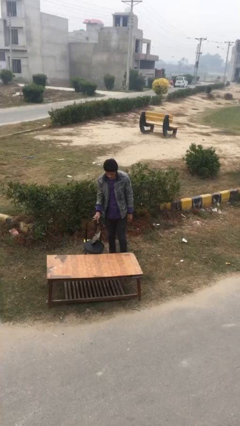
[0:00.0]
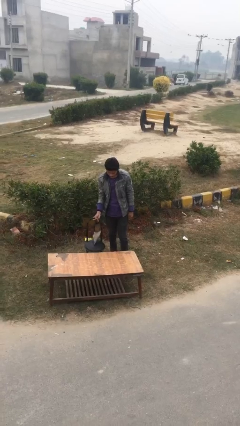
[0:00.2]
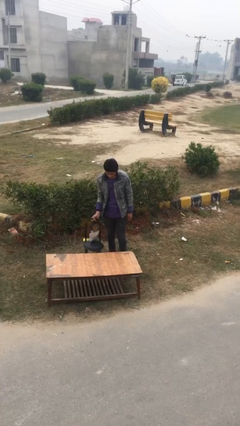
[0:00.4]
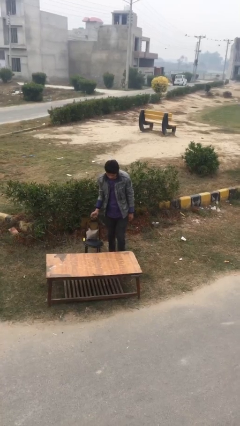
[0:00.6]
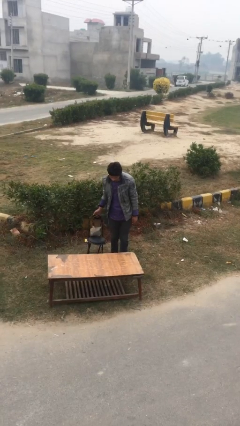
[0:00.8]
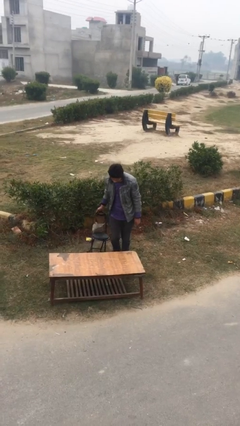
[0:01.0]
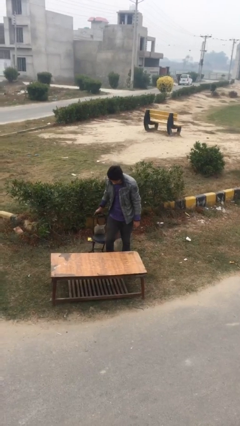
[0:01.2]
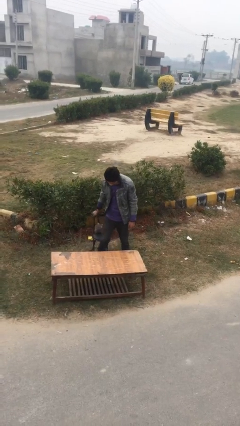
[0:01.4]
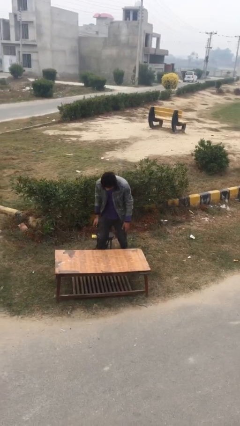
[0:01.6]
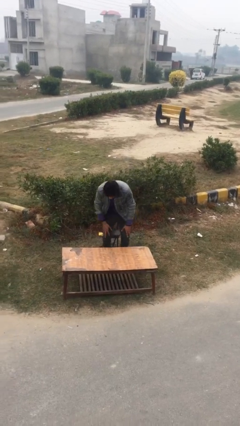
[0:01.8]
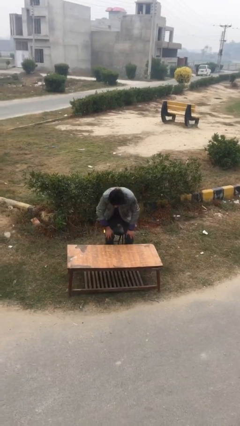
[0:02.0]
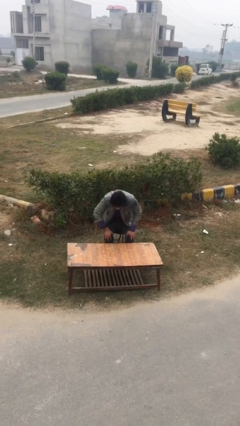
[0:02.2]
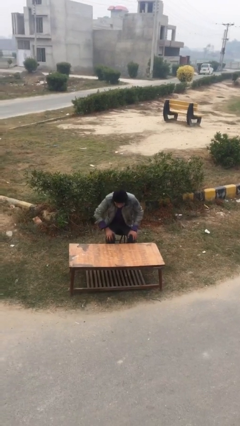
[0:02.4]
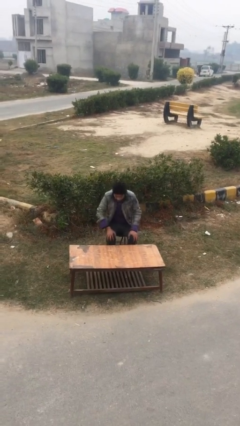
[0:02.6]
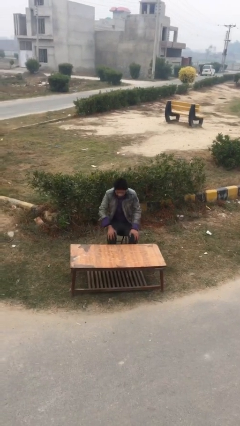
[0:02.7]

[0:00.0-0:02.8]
person sits down

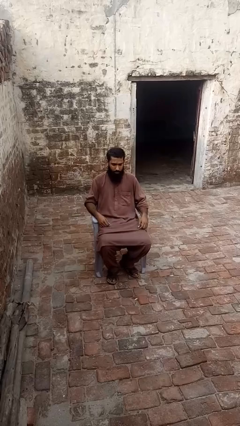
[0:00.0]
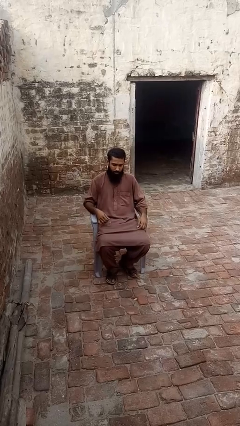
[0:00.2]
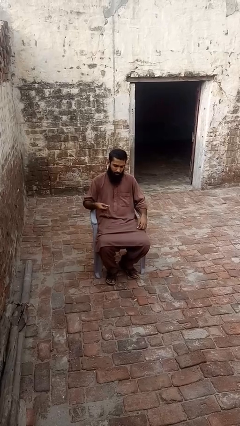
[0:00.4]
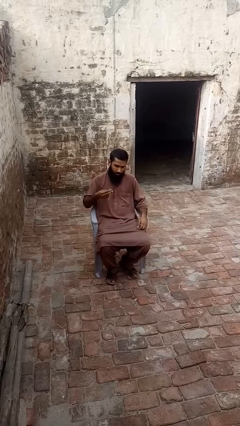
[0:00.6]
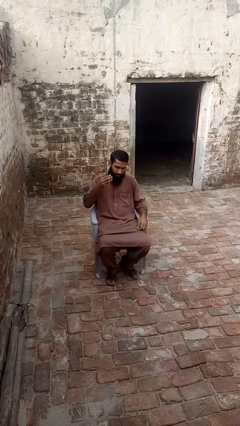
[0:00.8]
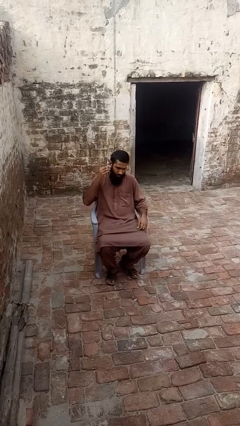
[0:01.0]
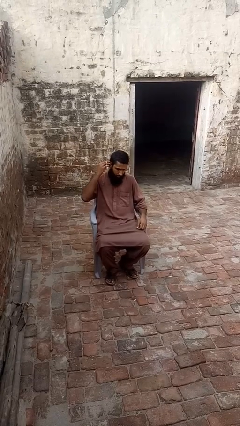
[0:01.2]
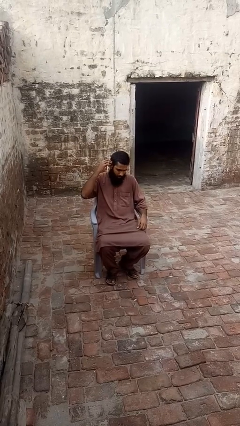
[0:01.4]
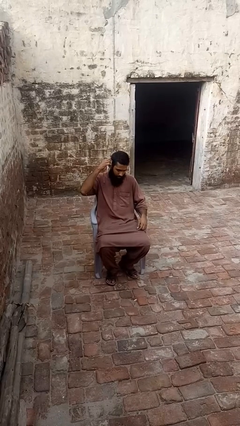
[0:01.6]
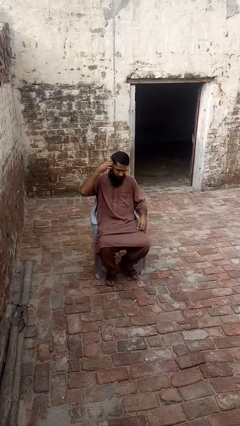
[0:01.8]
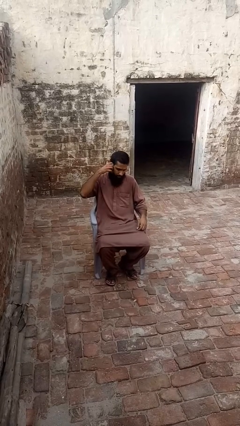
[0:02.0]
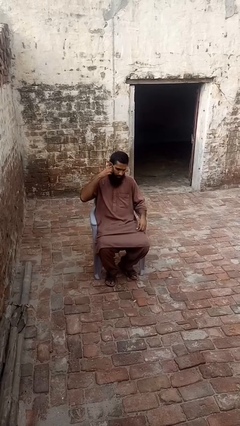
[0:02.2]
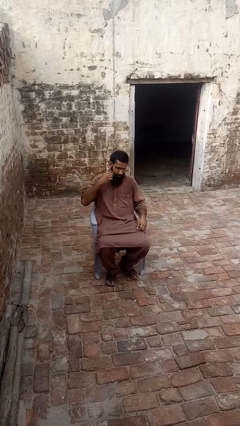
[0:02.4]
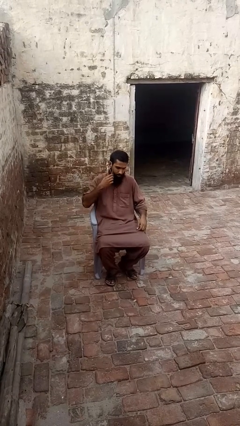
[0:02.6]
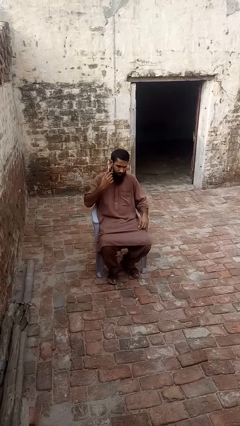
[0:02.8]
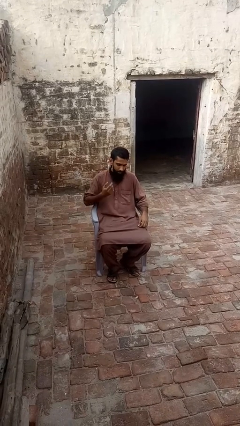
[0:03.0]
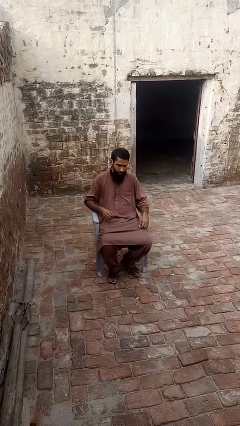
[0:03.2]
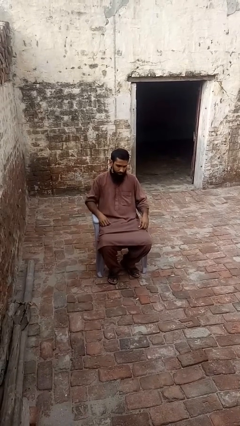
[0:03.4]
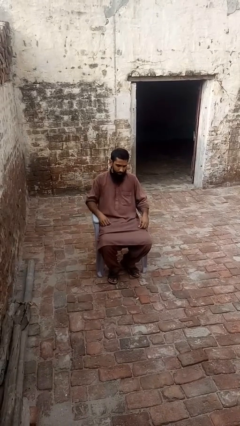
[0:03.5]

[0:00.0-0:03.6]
person puts on earrings

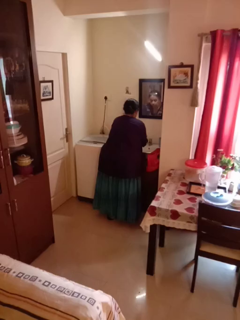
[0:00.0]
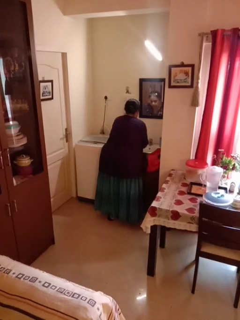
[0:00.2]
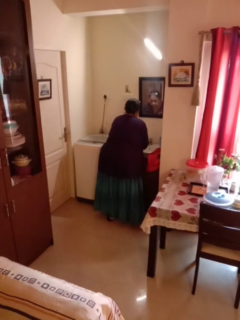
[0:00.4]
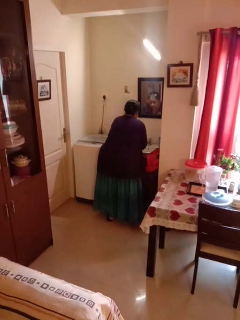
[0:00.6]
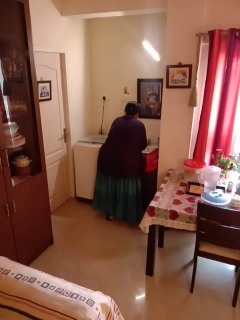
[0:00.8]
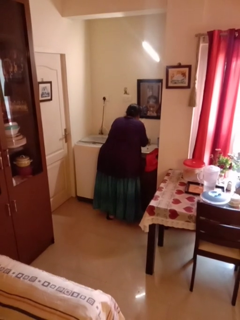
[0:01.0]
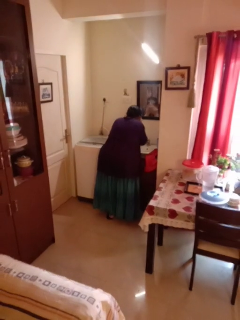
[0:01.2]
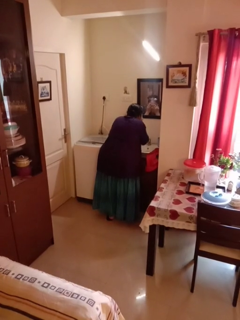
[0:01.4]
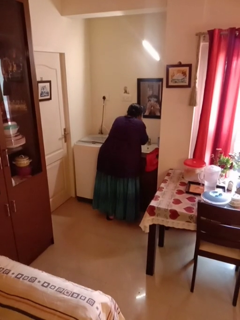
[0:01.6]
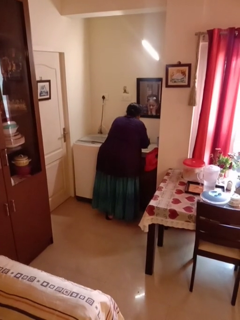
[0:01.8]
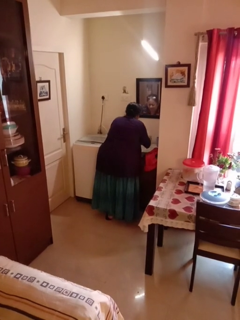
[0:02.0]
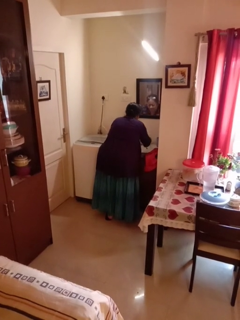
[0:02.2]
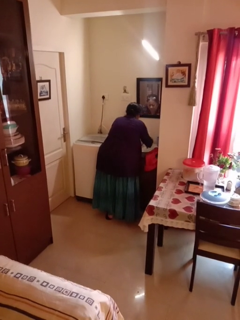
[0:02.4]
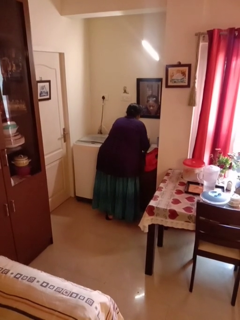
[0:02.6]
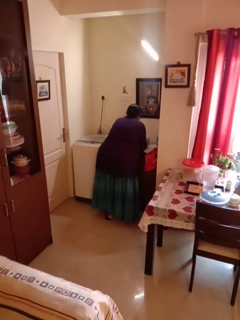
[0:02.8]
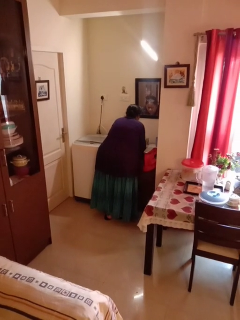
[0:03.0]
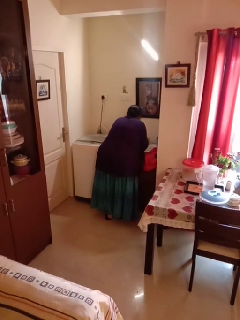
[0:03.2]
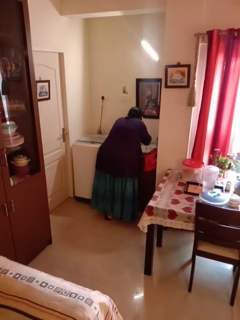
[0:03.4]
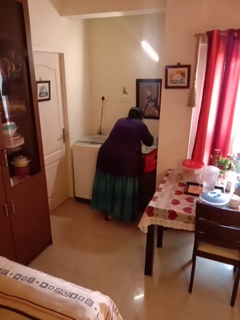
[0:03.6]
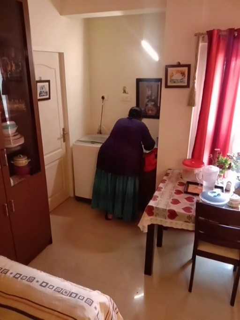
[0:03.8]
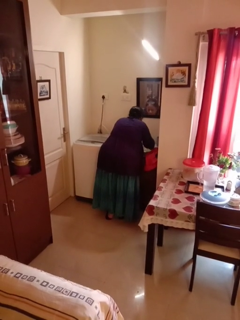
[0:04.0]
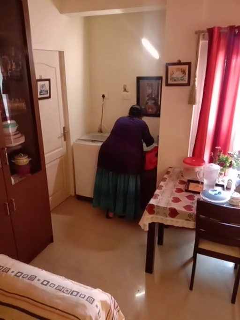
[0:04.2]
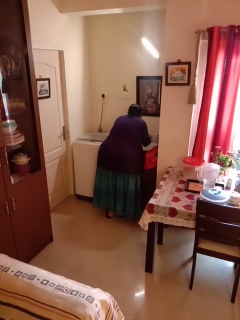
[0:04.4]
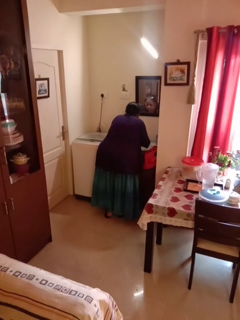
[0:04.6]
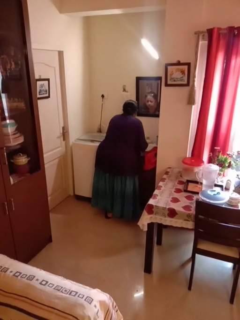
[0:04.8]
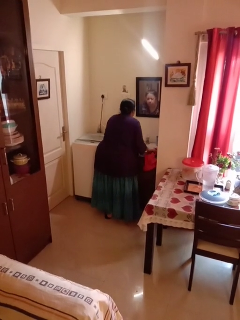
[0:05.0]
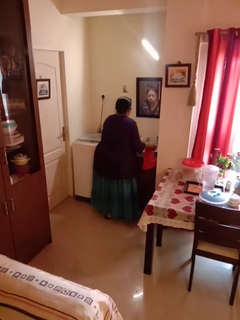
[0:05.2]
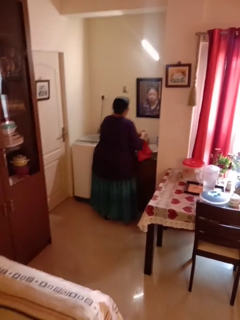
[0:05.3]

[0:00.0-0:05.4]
person washes face

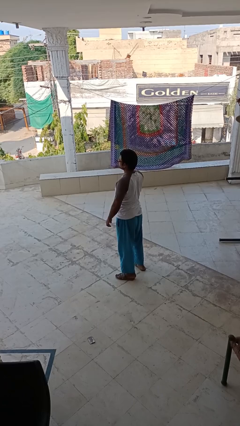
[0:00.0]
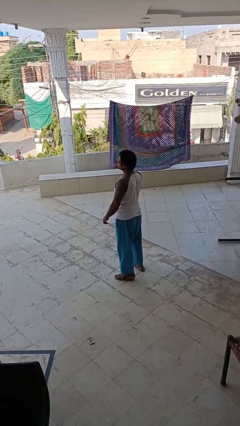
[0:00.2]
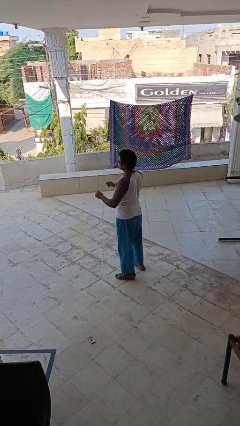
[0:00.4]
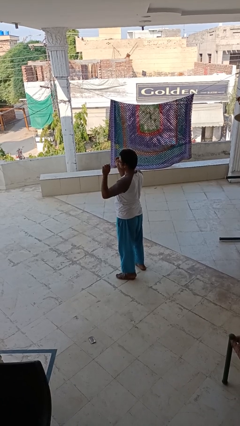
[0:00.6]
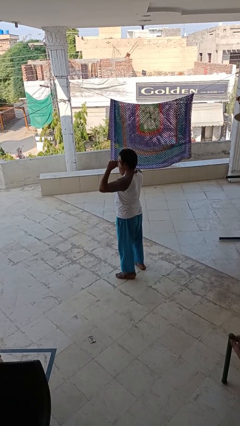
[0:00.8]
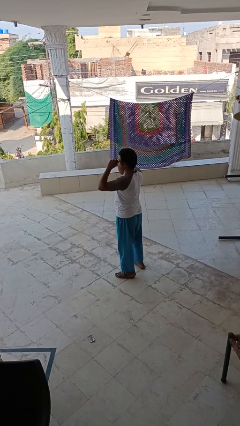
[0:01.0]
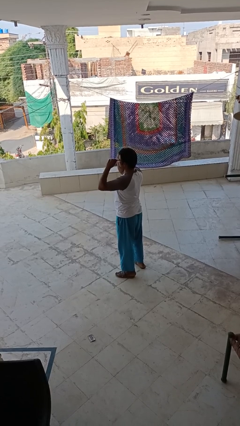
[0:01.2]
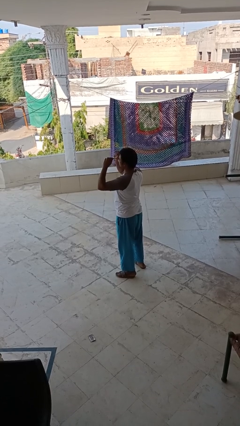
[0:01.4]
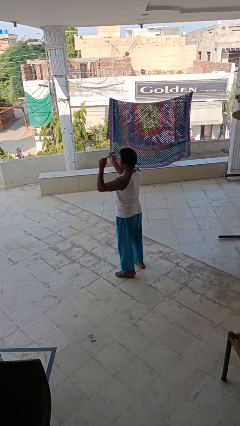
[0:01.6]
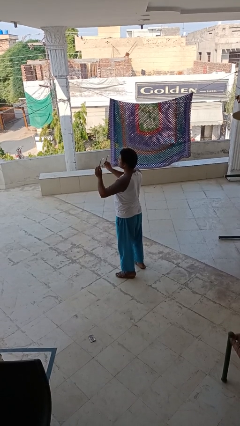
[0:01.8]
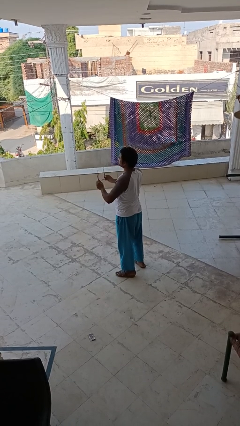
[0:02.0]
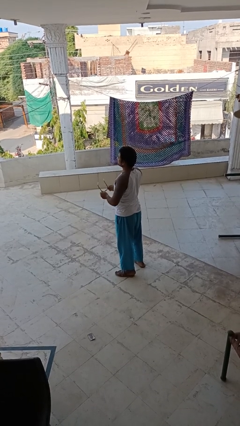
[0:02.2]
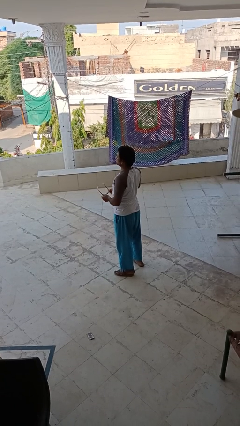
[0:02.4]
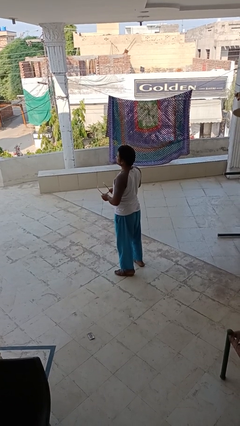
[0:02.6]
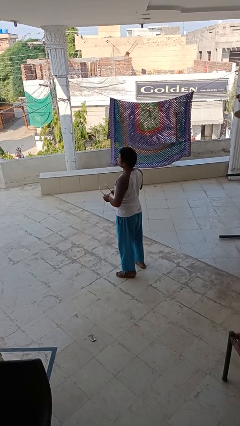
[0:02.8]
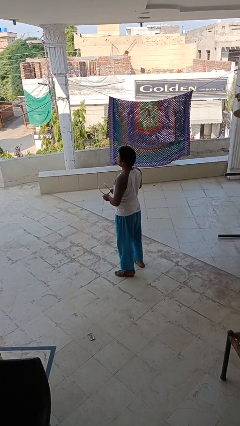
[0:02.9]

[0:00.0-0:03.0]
person takes off glasses

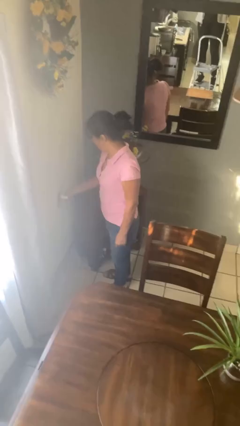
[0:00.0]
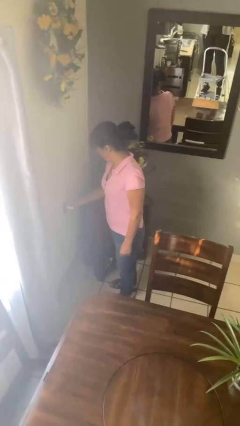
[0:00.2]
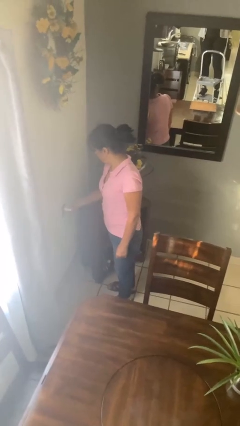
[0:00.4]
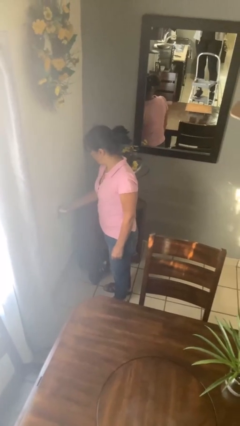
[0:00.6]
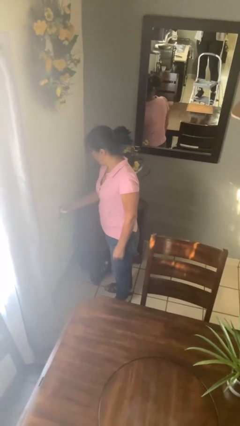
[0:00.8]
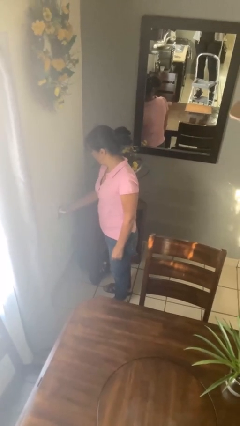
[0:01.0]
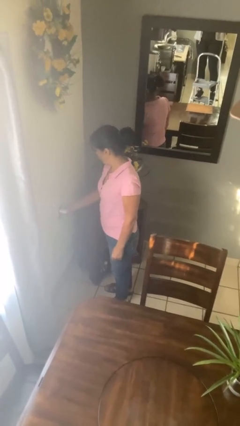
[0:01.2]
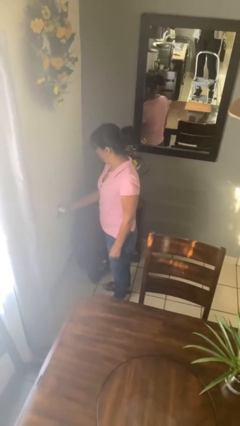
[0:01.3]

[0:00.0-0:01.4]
person plugs into electrical socket

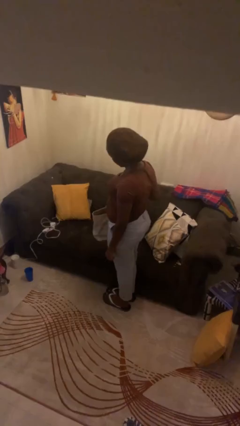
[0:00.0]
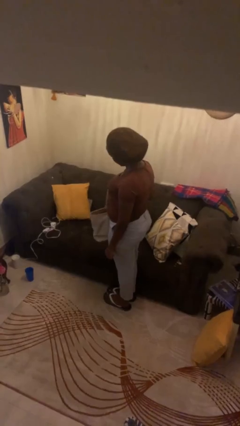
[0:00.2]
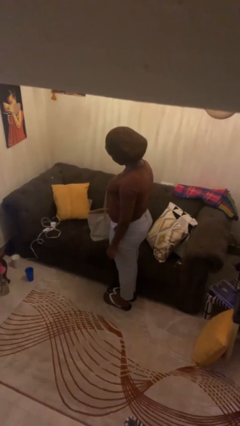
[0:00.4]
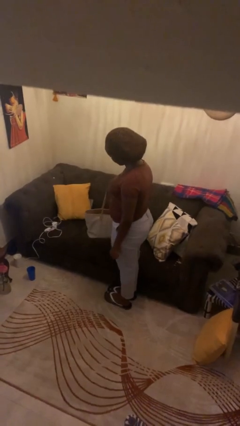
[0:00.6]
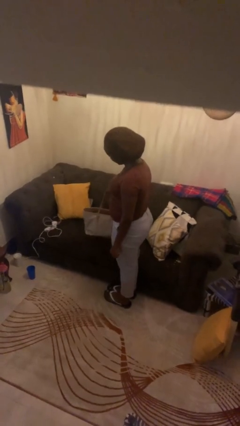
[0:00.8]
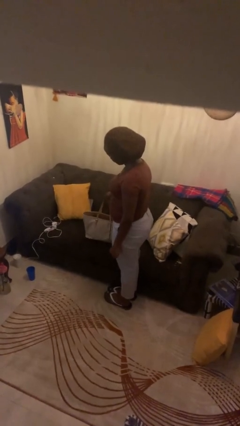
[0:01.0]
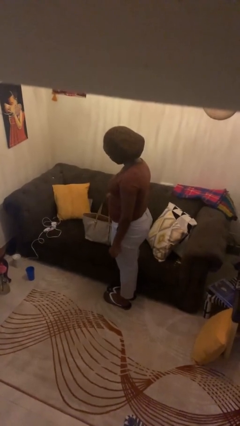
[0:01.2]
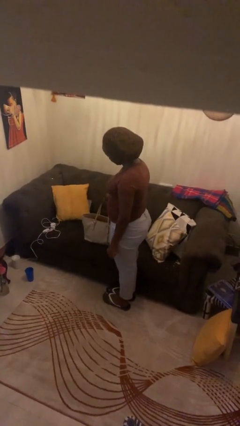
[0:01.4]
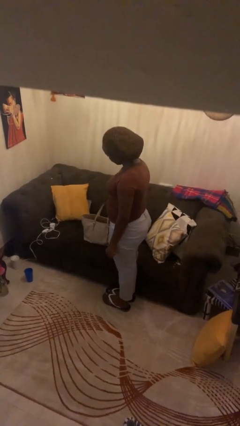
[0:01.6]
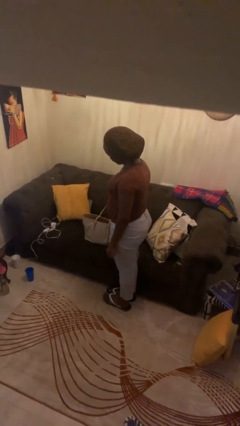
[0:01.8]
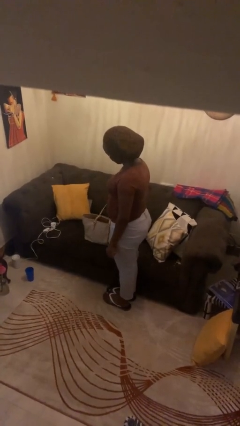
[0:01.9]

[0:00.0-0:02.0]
person puts down object on couch

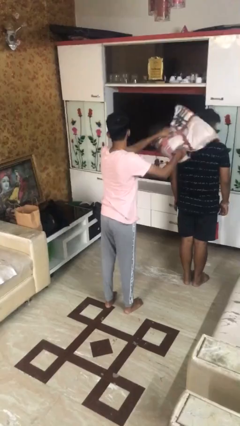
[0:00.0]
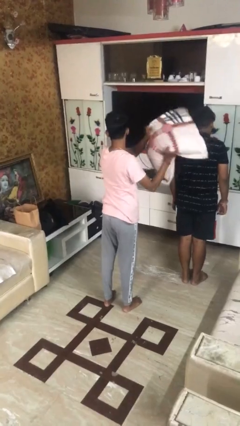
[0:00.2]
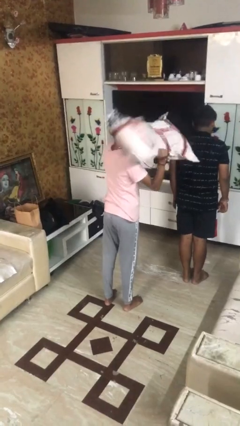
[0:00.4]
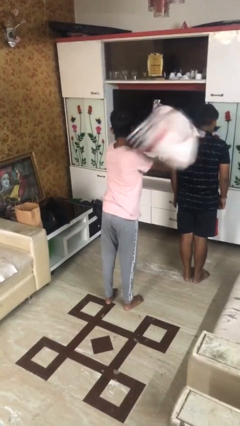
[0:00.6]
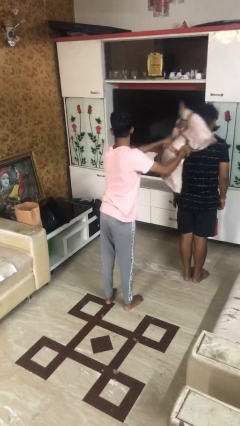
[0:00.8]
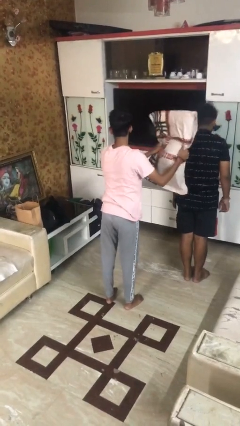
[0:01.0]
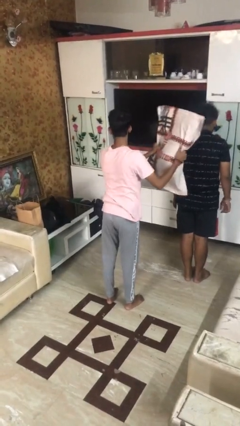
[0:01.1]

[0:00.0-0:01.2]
person hits person with pillow
